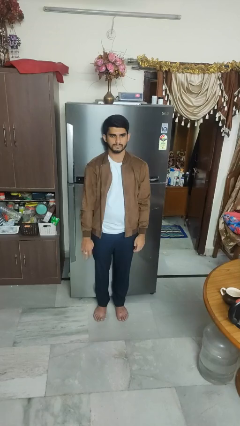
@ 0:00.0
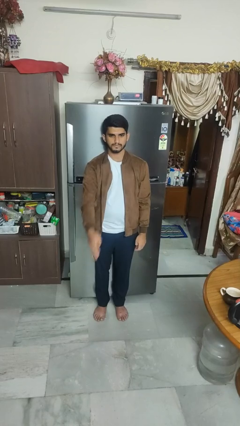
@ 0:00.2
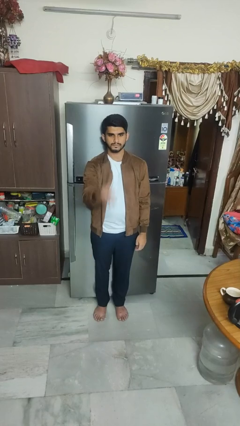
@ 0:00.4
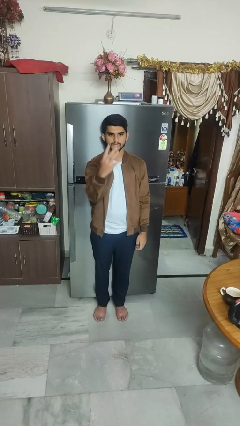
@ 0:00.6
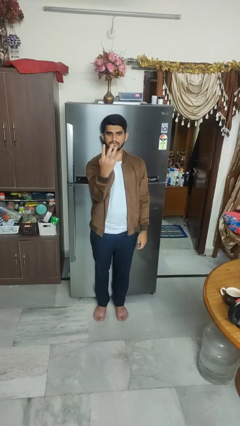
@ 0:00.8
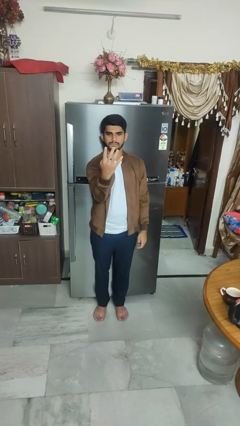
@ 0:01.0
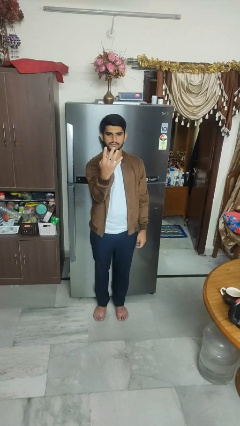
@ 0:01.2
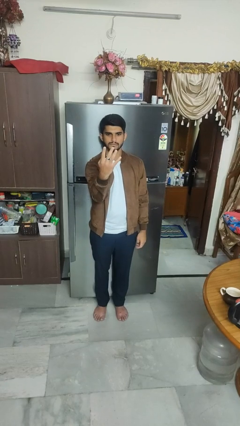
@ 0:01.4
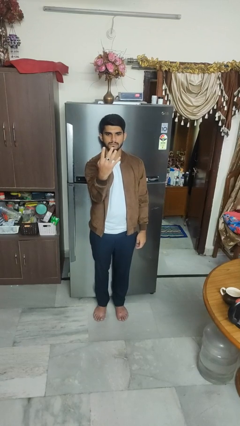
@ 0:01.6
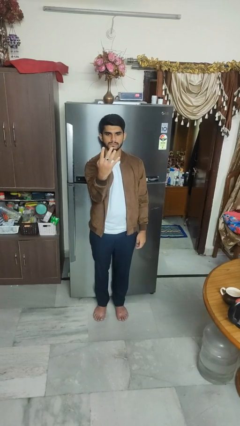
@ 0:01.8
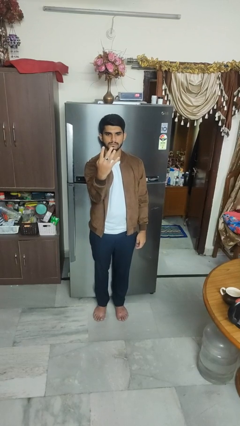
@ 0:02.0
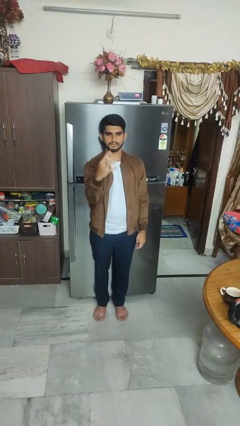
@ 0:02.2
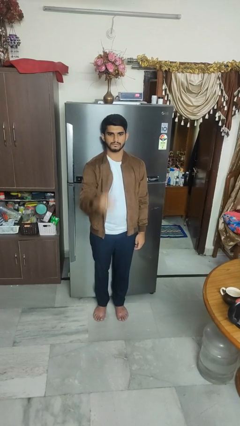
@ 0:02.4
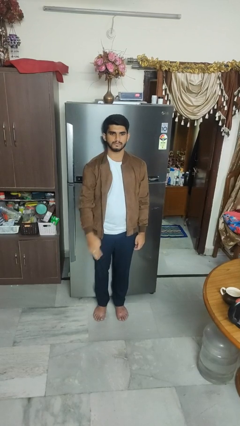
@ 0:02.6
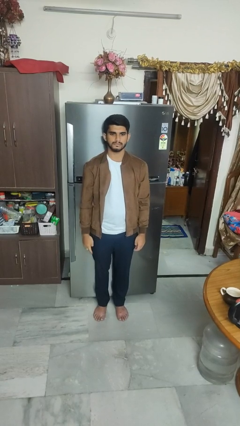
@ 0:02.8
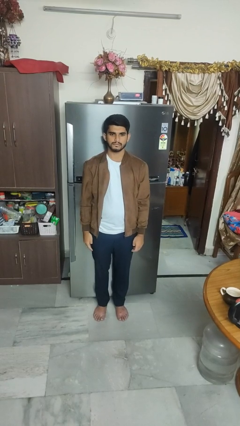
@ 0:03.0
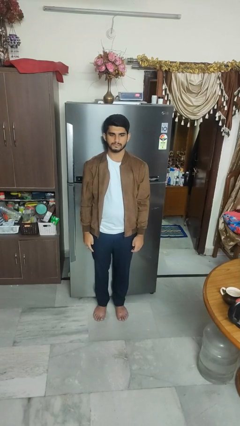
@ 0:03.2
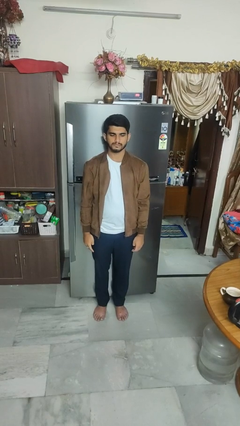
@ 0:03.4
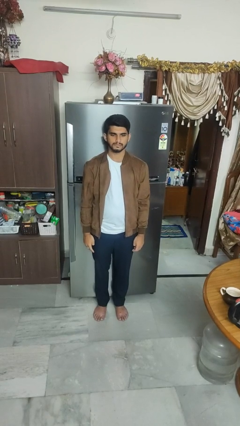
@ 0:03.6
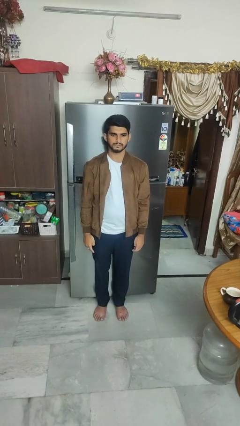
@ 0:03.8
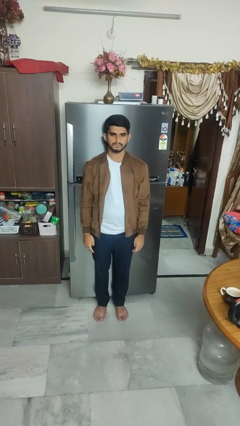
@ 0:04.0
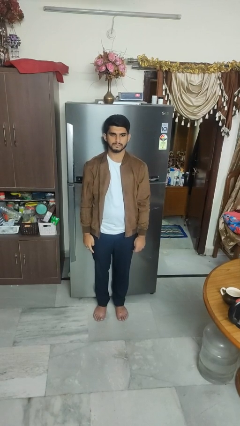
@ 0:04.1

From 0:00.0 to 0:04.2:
person gestures number four

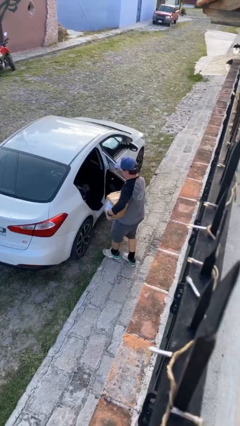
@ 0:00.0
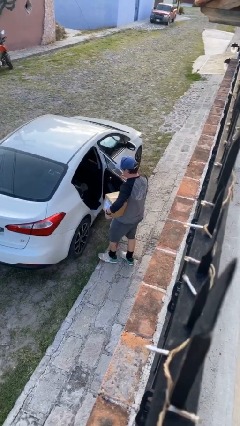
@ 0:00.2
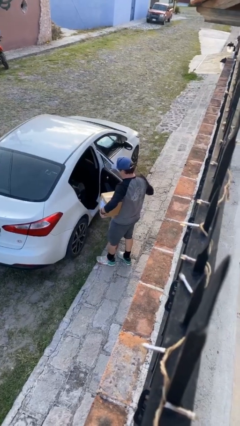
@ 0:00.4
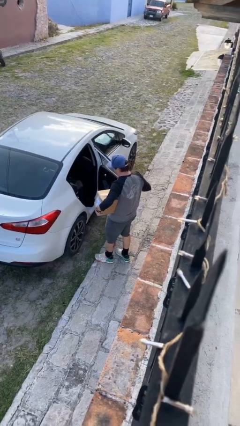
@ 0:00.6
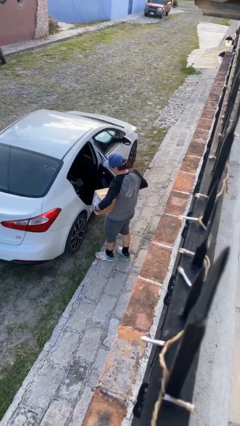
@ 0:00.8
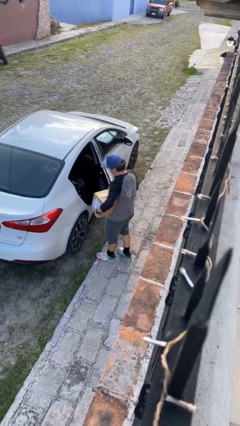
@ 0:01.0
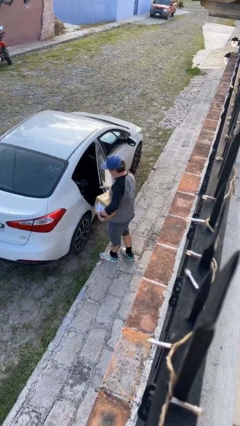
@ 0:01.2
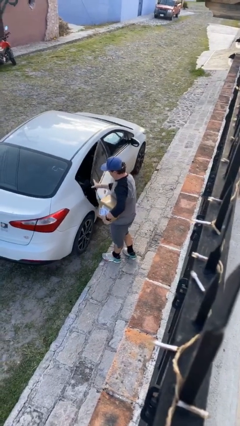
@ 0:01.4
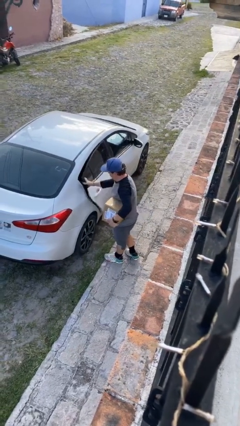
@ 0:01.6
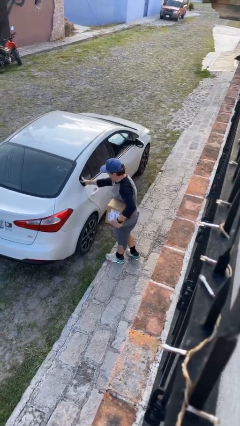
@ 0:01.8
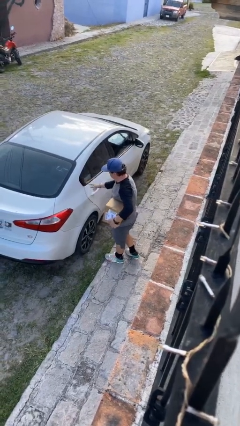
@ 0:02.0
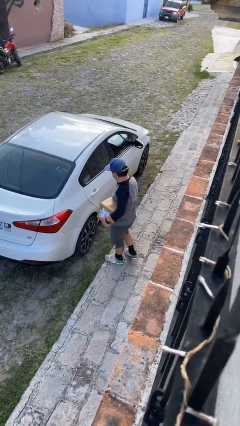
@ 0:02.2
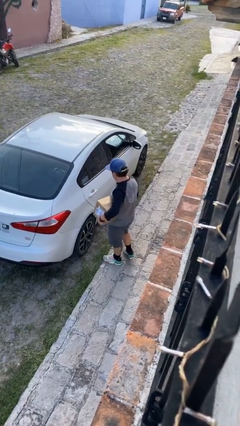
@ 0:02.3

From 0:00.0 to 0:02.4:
person closes car door

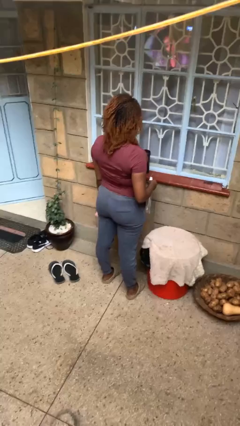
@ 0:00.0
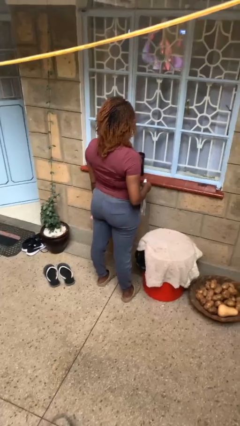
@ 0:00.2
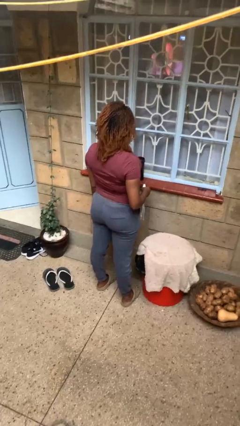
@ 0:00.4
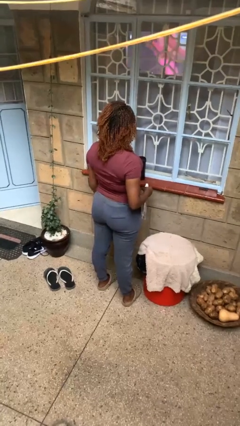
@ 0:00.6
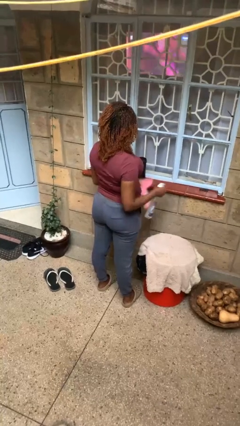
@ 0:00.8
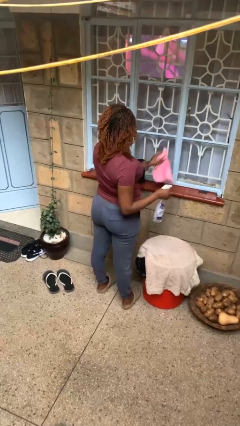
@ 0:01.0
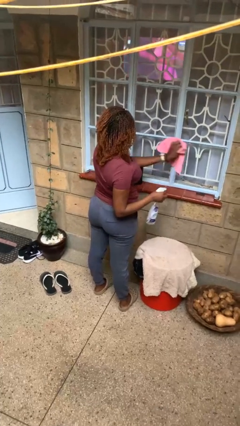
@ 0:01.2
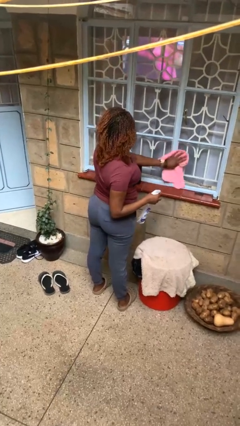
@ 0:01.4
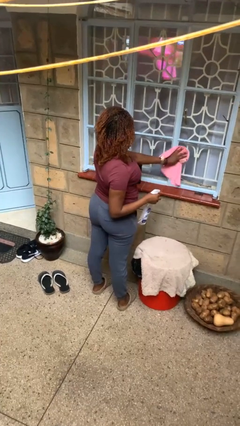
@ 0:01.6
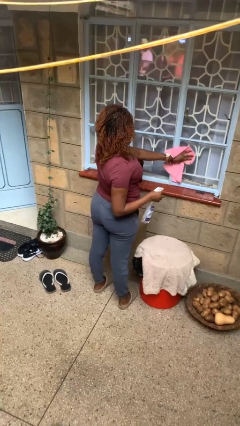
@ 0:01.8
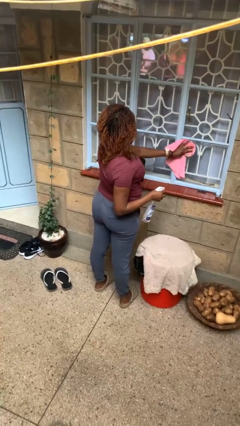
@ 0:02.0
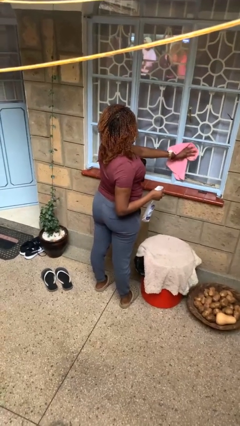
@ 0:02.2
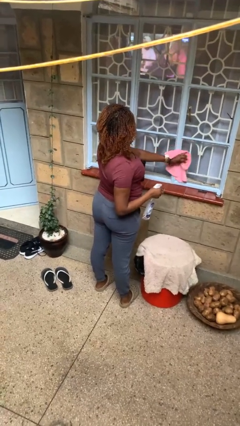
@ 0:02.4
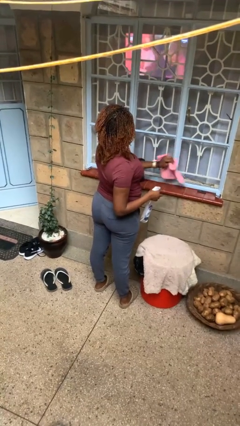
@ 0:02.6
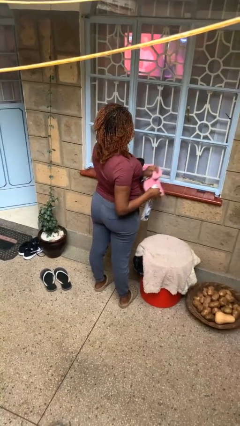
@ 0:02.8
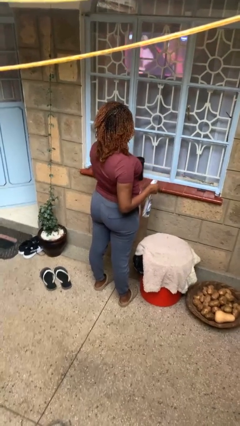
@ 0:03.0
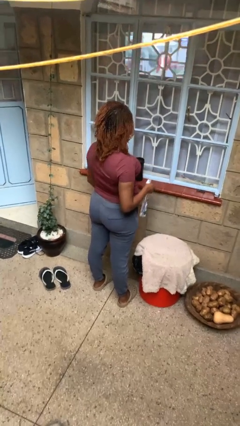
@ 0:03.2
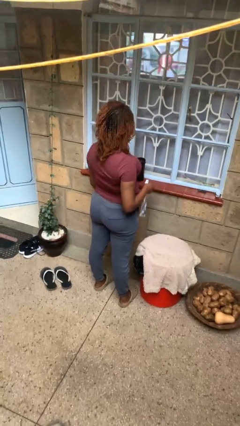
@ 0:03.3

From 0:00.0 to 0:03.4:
person washes window

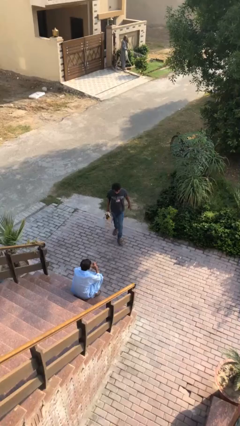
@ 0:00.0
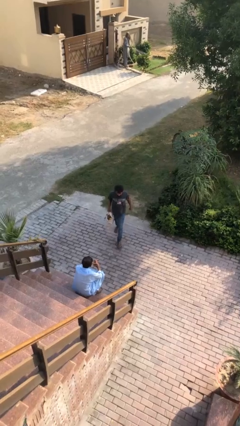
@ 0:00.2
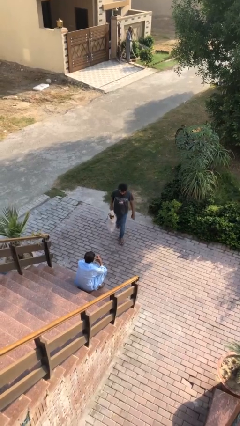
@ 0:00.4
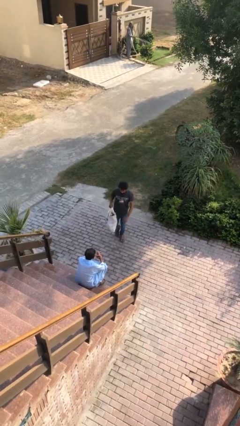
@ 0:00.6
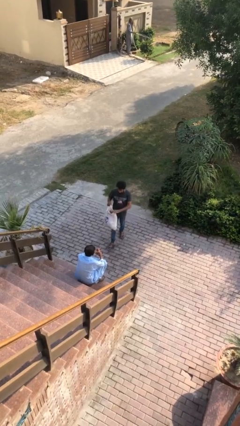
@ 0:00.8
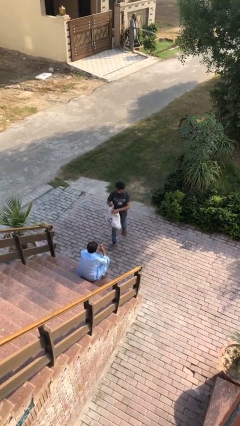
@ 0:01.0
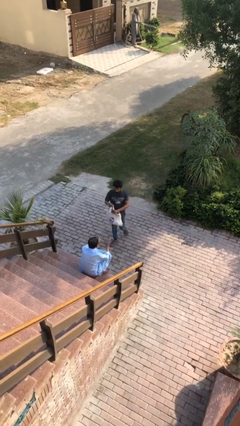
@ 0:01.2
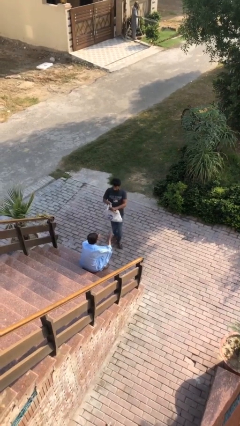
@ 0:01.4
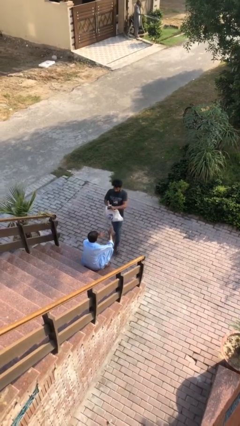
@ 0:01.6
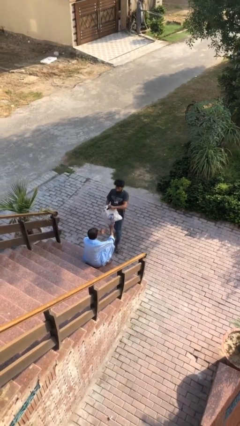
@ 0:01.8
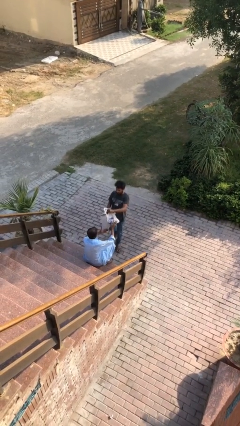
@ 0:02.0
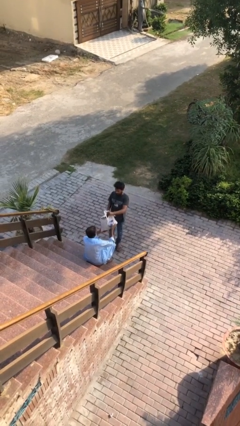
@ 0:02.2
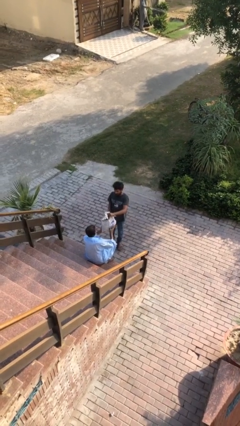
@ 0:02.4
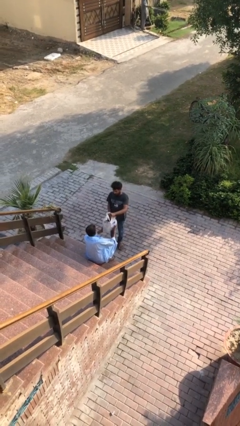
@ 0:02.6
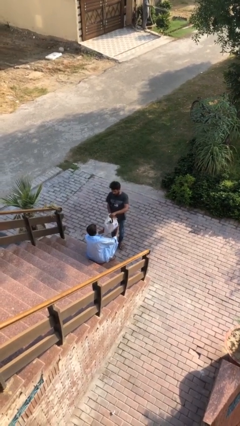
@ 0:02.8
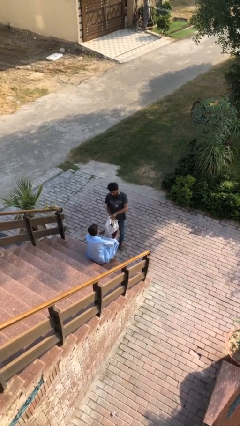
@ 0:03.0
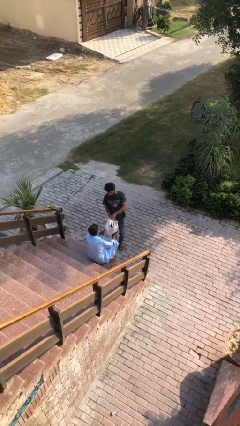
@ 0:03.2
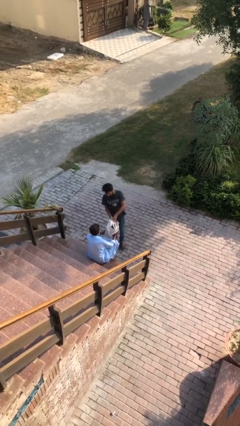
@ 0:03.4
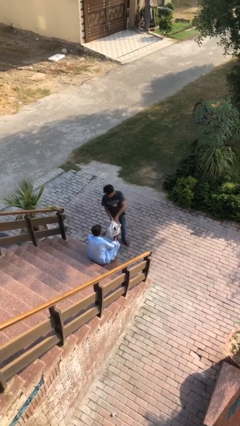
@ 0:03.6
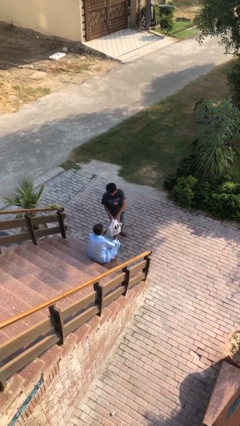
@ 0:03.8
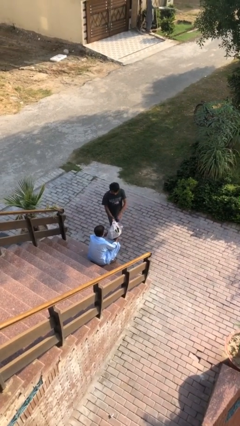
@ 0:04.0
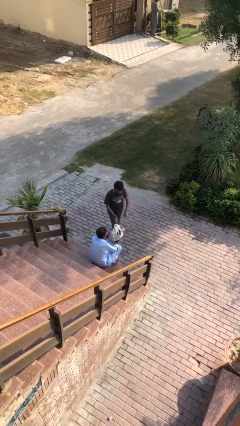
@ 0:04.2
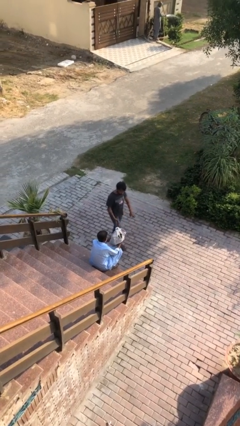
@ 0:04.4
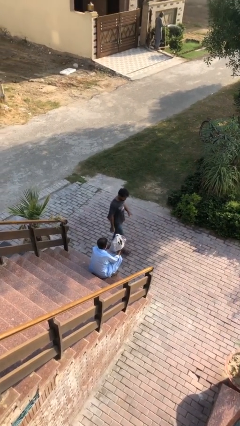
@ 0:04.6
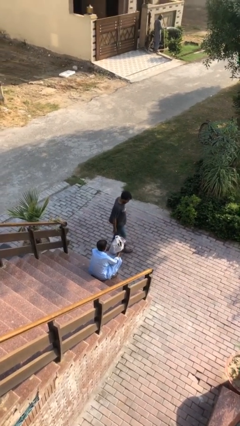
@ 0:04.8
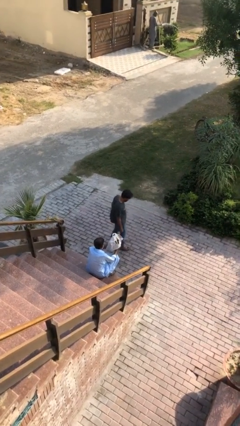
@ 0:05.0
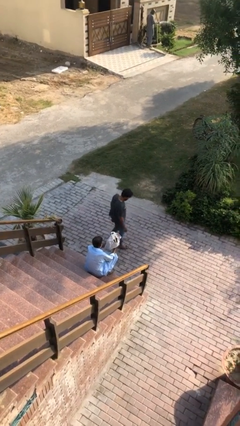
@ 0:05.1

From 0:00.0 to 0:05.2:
person transfers object to person

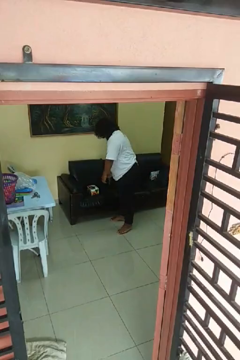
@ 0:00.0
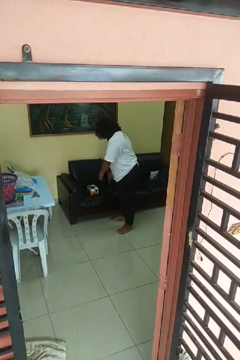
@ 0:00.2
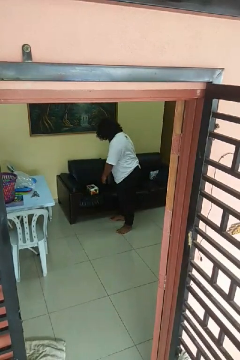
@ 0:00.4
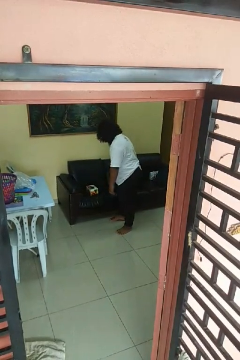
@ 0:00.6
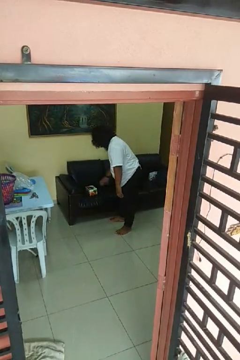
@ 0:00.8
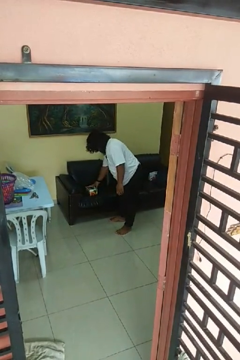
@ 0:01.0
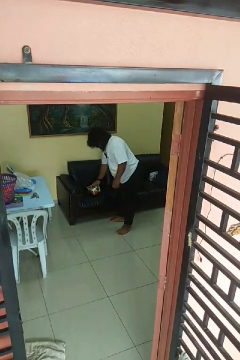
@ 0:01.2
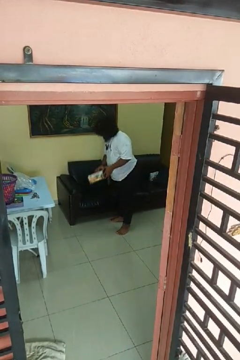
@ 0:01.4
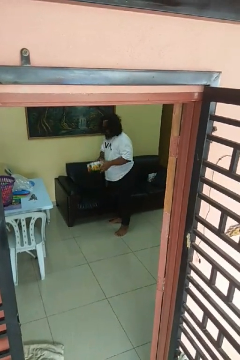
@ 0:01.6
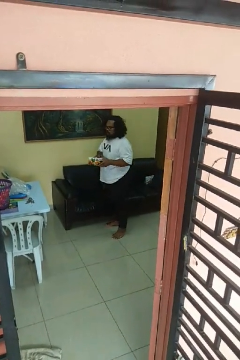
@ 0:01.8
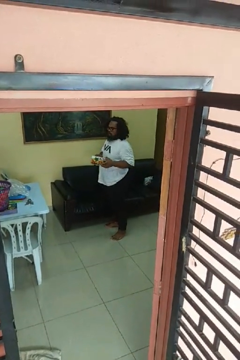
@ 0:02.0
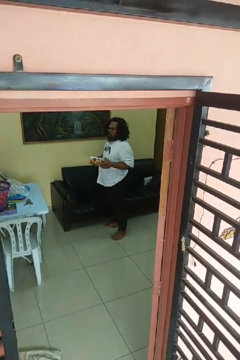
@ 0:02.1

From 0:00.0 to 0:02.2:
person picks up object from couch

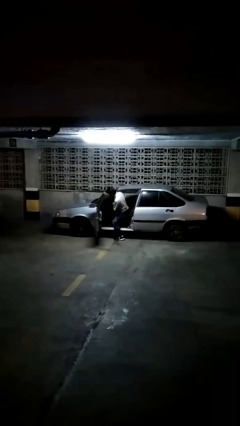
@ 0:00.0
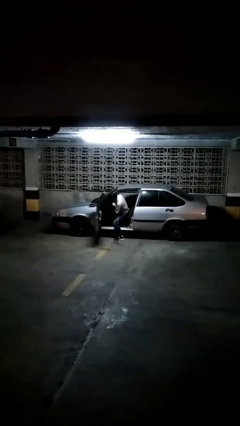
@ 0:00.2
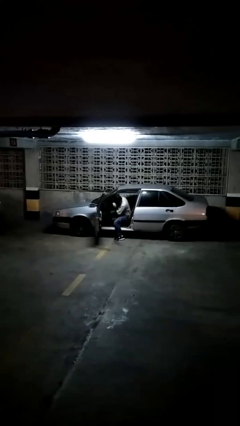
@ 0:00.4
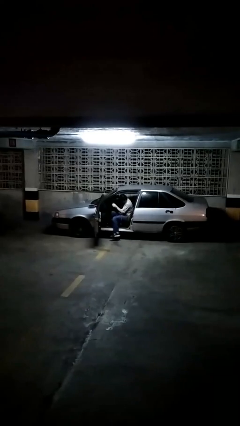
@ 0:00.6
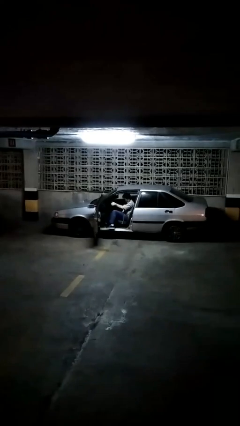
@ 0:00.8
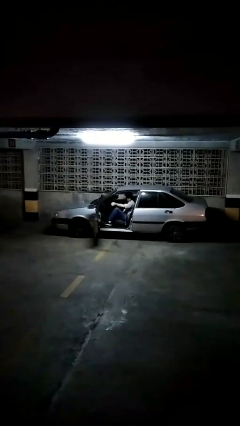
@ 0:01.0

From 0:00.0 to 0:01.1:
person enters car
